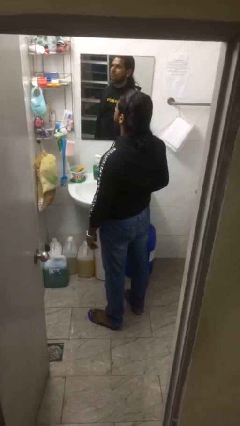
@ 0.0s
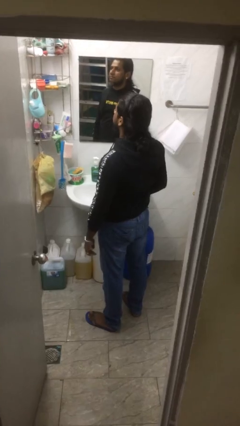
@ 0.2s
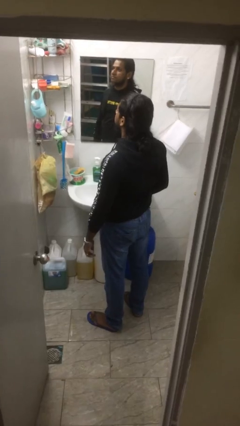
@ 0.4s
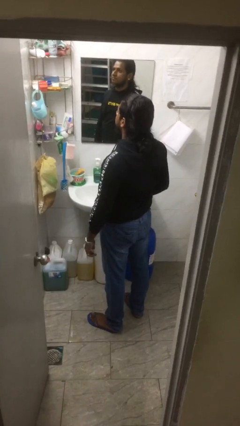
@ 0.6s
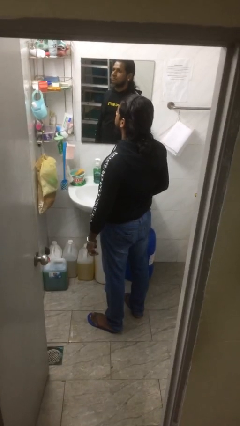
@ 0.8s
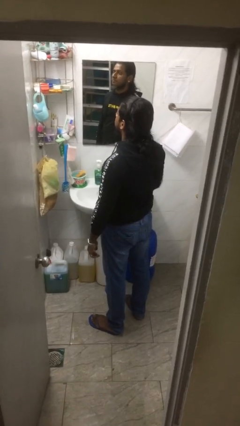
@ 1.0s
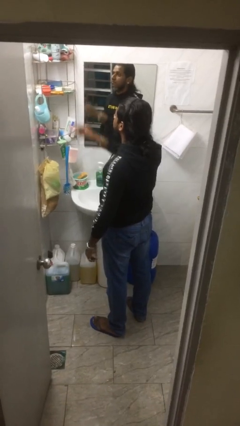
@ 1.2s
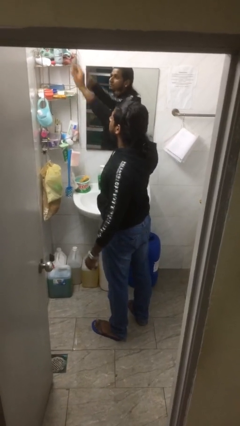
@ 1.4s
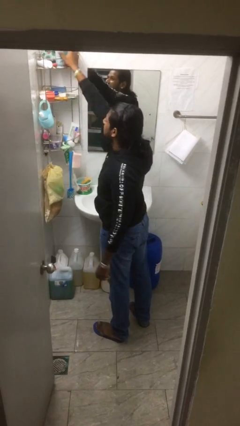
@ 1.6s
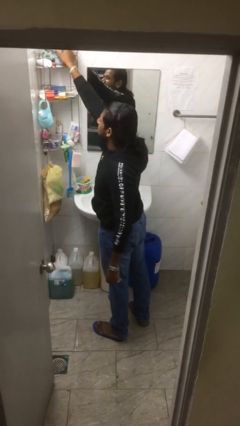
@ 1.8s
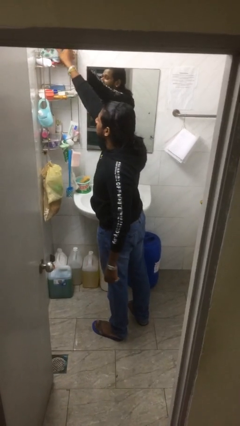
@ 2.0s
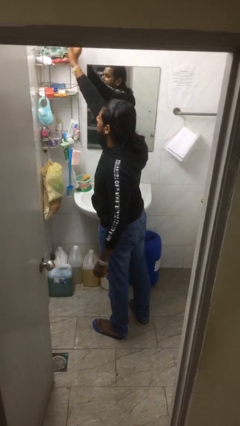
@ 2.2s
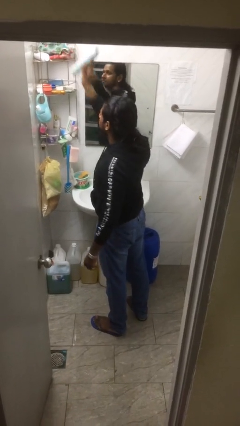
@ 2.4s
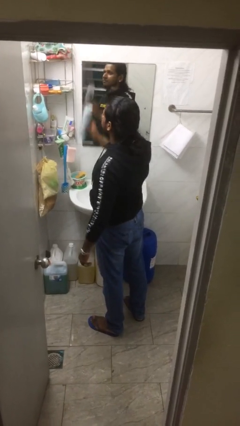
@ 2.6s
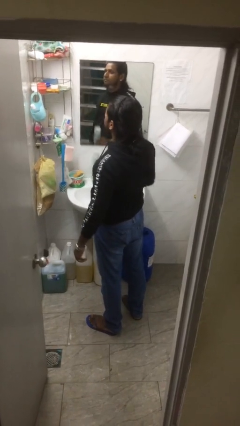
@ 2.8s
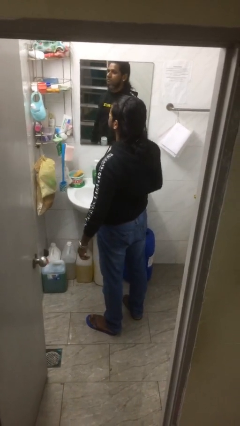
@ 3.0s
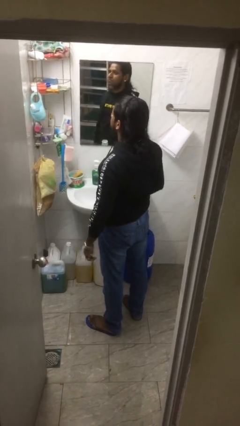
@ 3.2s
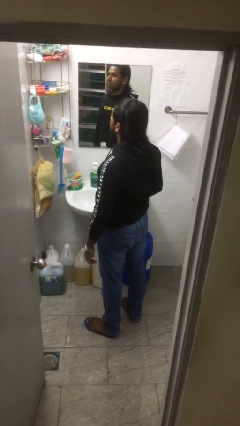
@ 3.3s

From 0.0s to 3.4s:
person picks up object from countertop

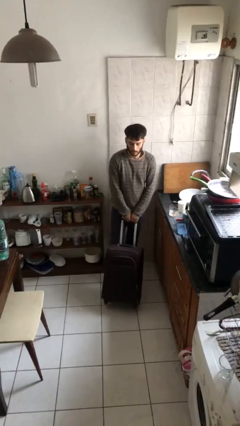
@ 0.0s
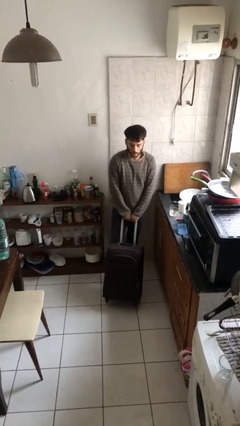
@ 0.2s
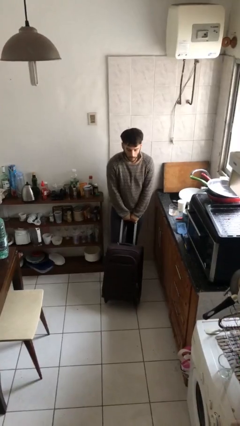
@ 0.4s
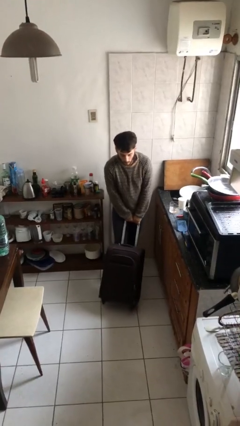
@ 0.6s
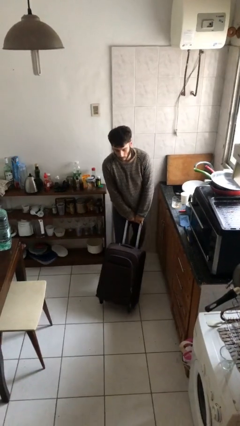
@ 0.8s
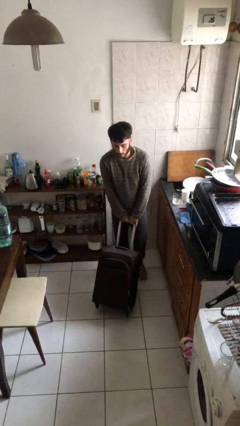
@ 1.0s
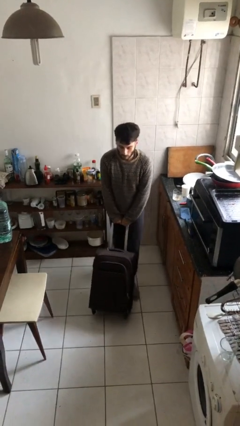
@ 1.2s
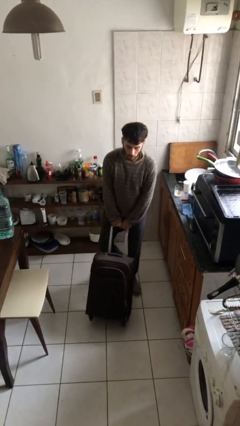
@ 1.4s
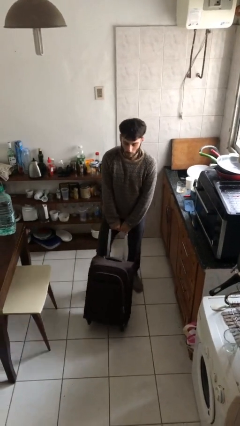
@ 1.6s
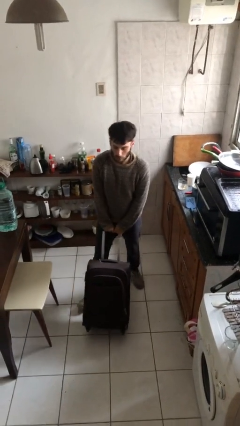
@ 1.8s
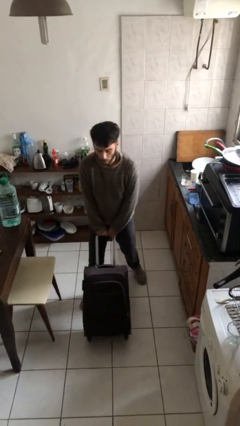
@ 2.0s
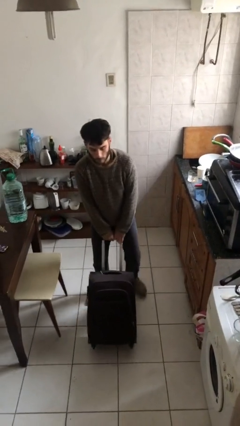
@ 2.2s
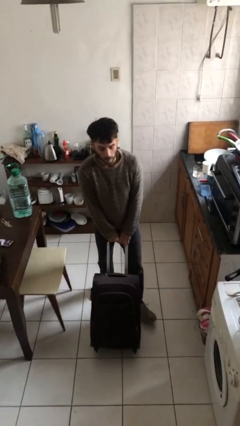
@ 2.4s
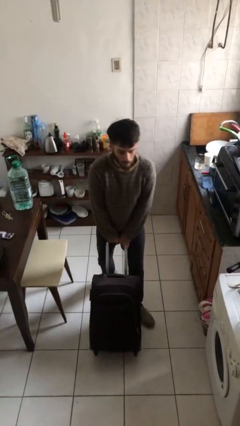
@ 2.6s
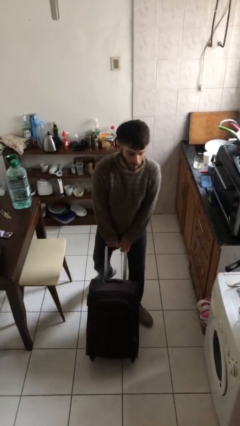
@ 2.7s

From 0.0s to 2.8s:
person pushes wheeled cart

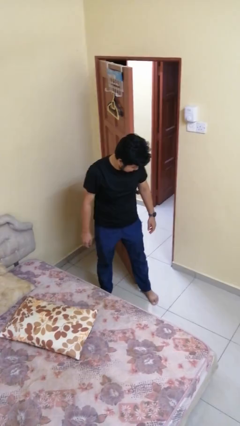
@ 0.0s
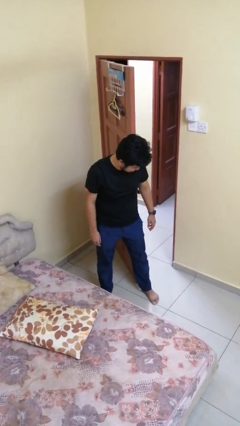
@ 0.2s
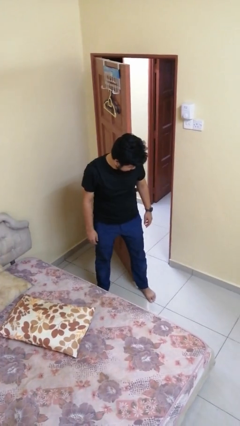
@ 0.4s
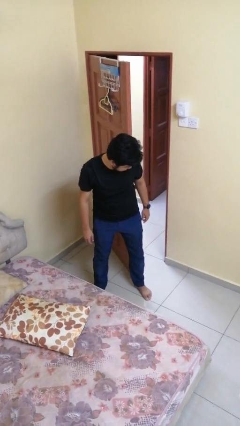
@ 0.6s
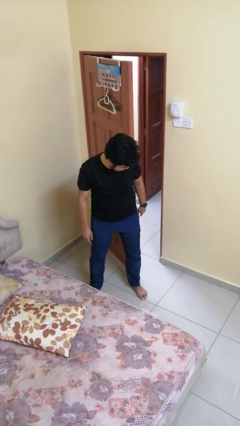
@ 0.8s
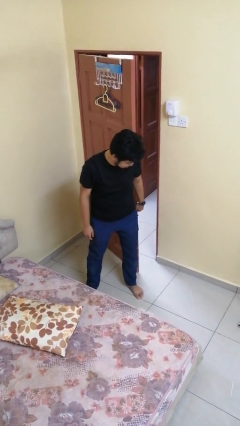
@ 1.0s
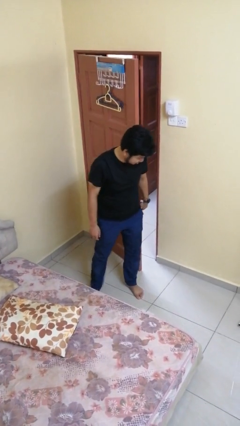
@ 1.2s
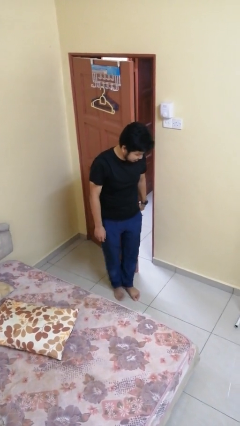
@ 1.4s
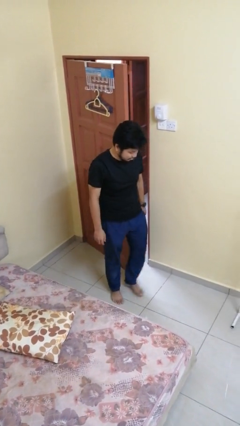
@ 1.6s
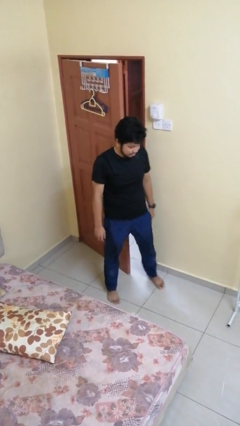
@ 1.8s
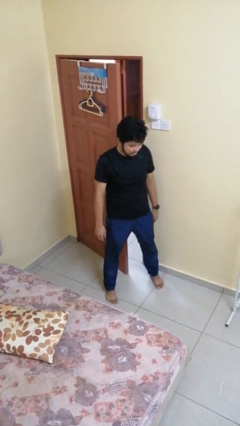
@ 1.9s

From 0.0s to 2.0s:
person closes door with hip

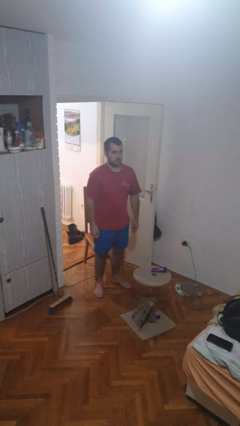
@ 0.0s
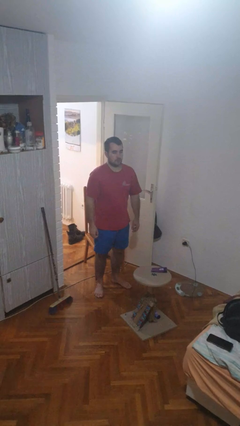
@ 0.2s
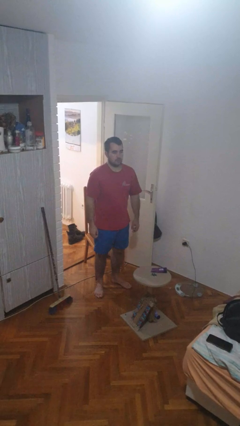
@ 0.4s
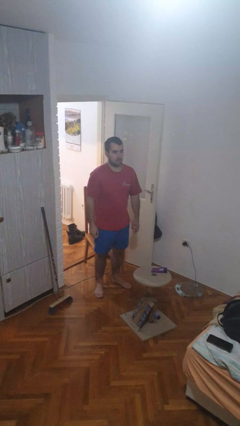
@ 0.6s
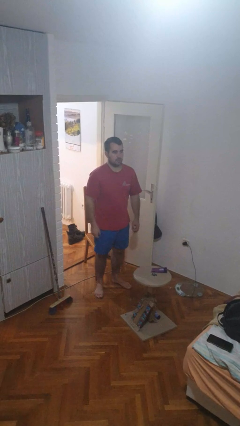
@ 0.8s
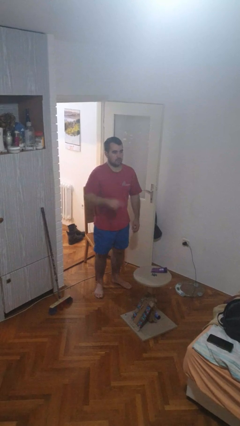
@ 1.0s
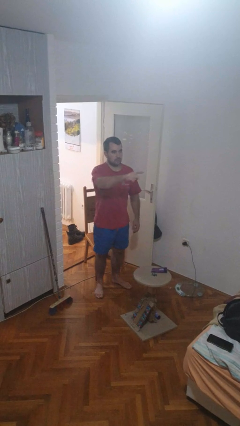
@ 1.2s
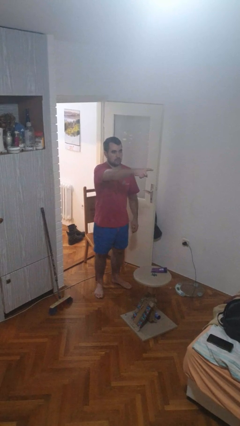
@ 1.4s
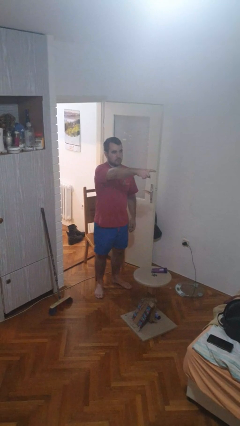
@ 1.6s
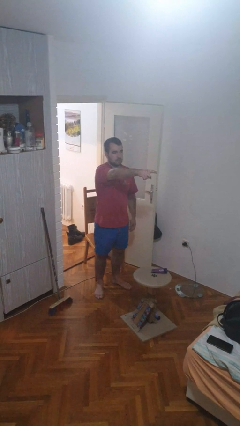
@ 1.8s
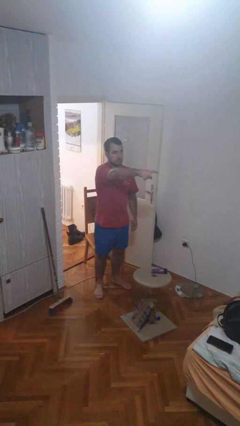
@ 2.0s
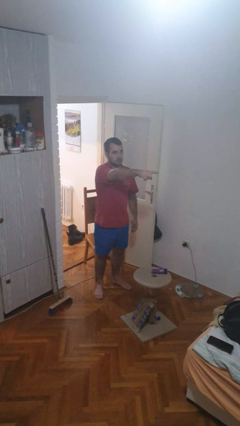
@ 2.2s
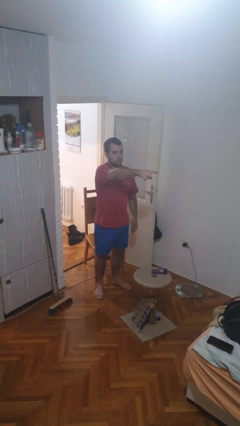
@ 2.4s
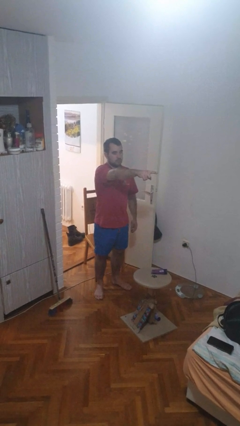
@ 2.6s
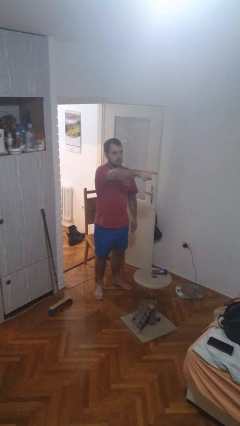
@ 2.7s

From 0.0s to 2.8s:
person points at person

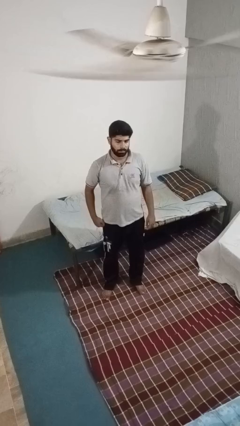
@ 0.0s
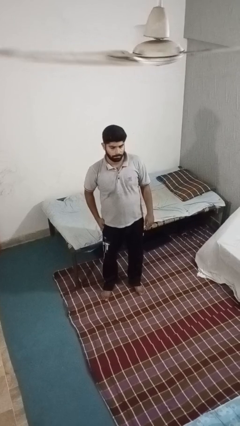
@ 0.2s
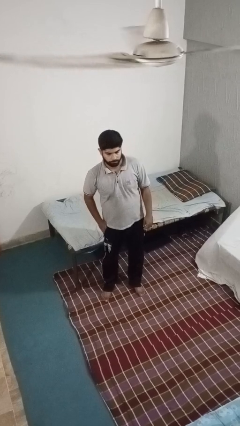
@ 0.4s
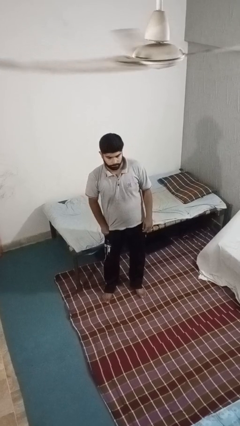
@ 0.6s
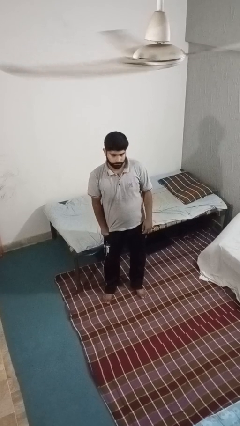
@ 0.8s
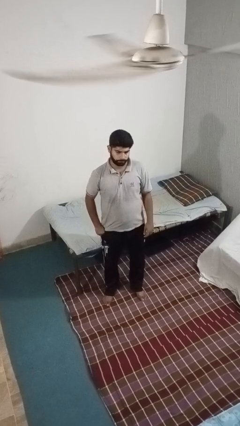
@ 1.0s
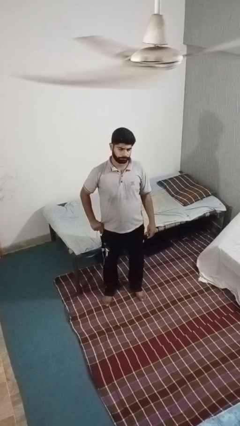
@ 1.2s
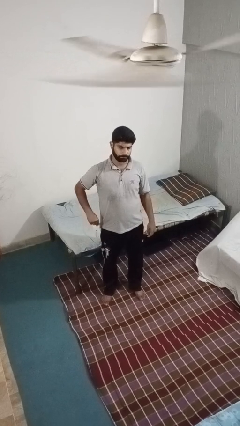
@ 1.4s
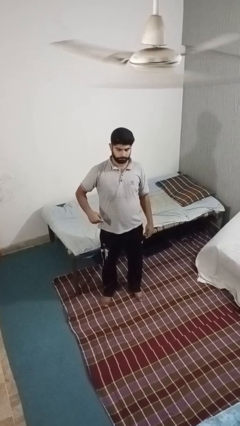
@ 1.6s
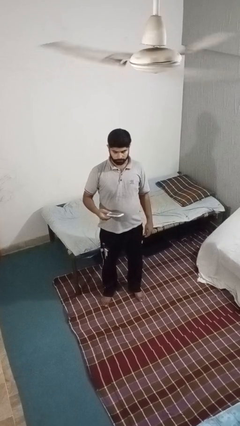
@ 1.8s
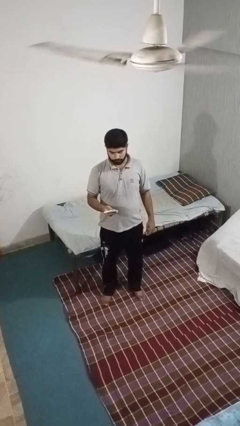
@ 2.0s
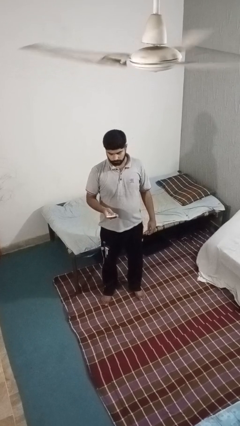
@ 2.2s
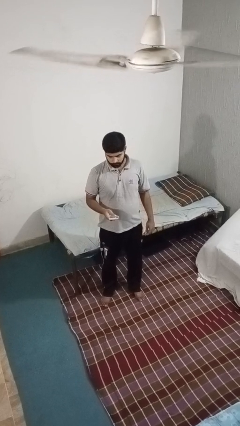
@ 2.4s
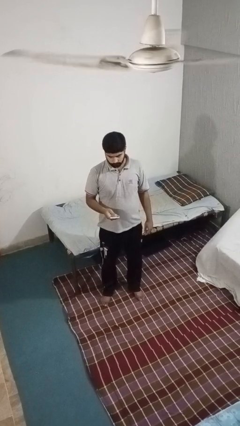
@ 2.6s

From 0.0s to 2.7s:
person takes phone from pocket

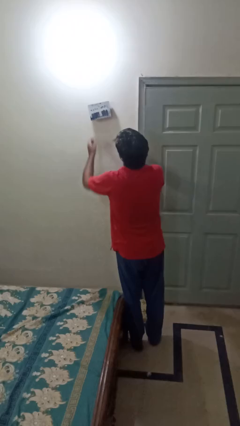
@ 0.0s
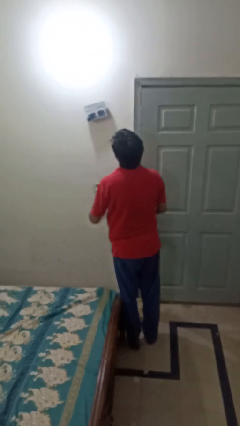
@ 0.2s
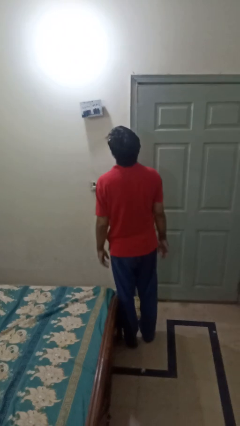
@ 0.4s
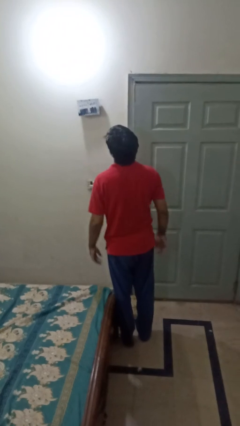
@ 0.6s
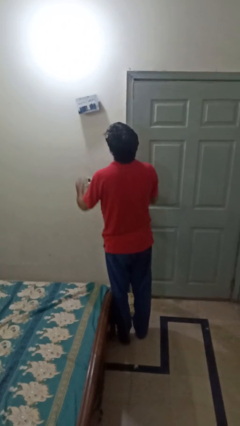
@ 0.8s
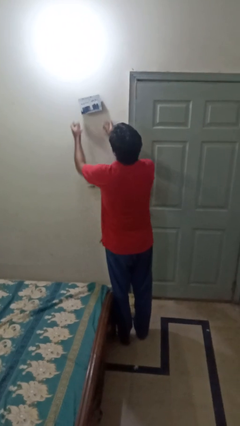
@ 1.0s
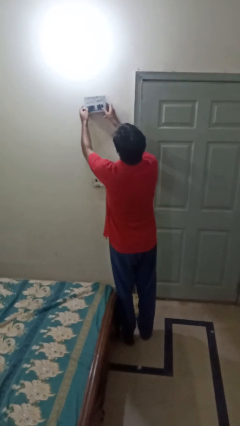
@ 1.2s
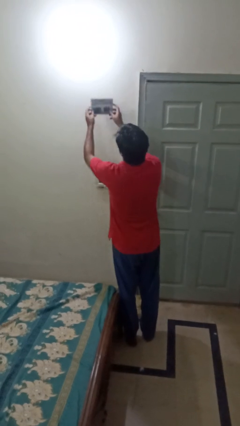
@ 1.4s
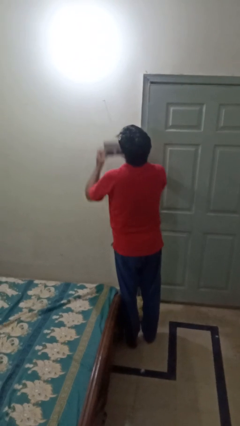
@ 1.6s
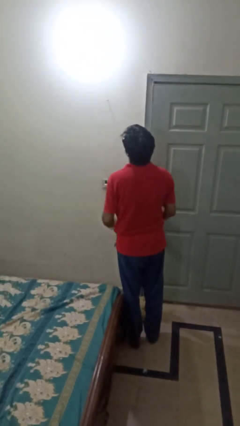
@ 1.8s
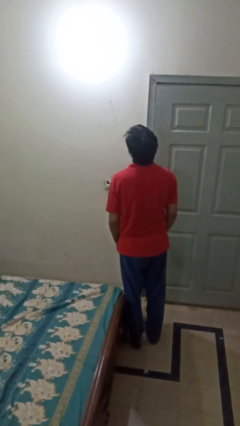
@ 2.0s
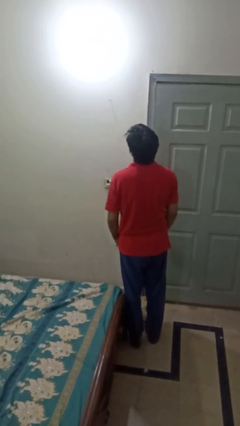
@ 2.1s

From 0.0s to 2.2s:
person takes down picture frame

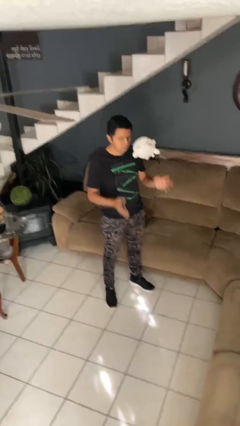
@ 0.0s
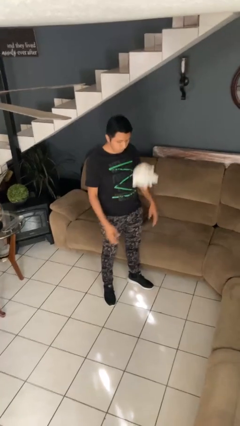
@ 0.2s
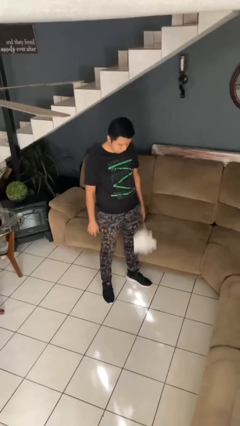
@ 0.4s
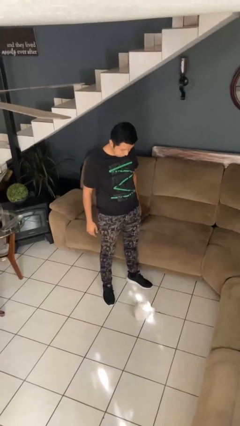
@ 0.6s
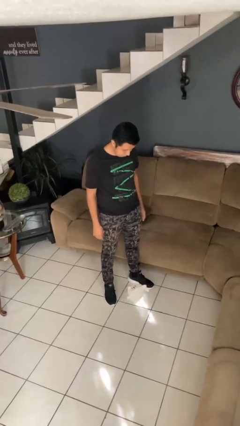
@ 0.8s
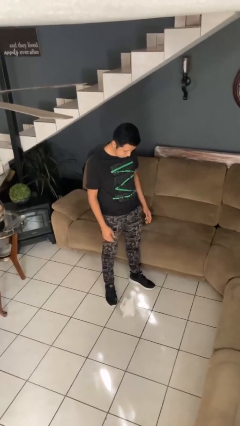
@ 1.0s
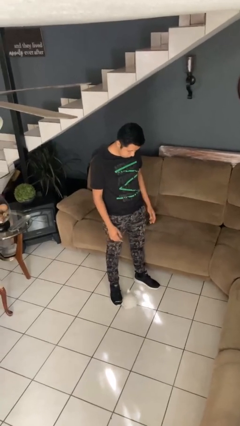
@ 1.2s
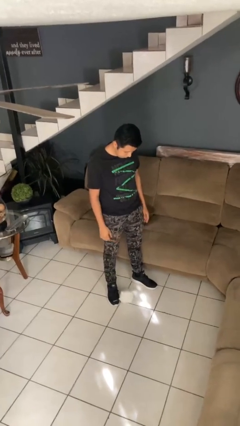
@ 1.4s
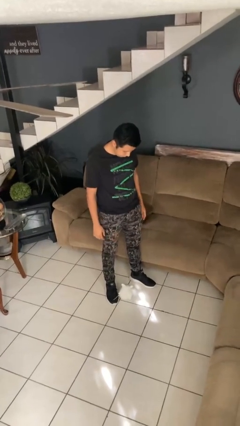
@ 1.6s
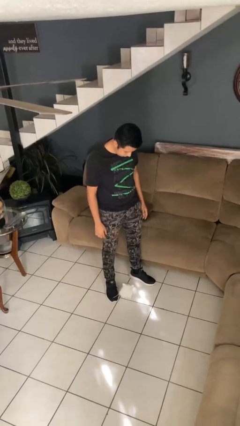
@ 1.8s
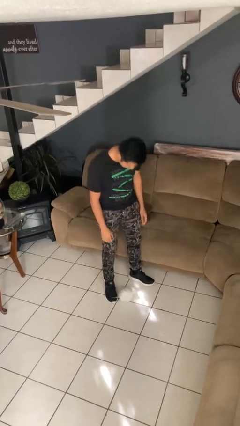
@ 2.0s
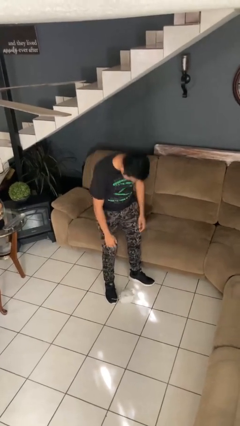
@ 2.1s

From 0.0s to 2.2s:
person throws object into air
